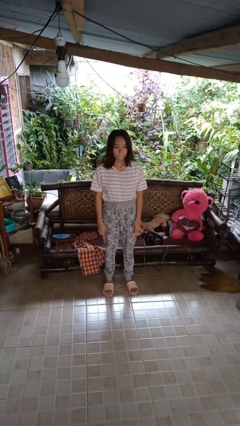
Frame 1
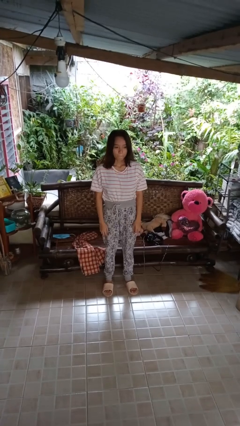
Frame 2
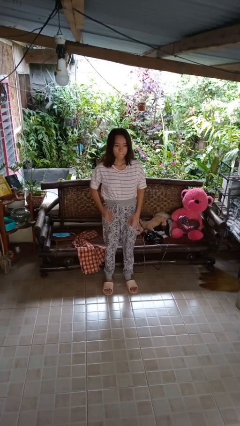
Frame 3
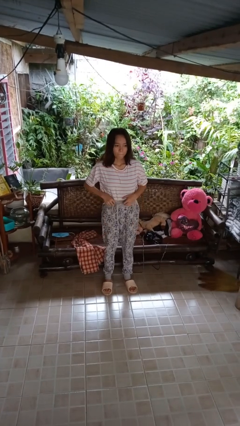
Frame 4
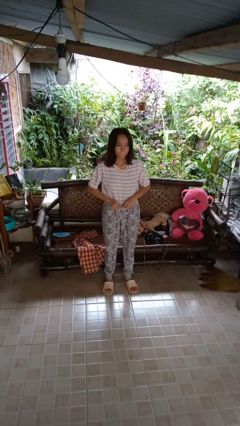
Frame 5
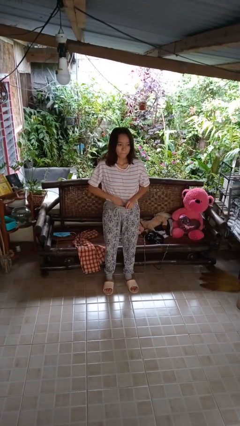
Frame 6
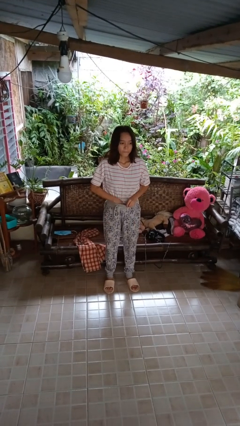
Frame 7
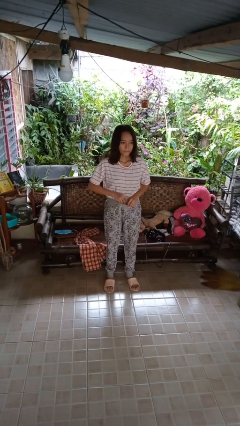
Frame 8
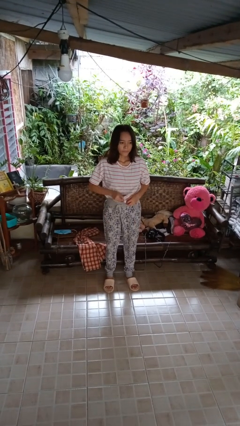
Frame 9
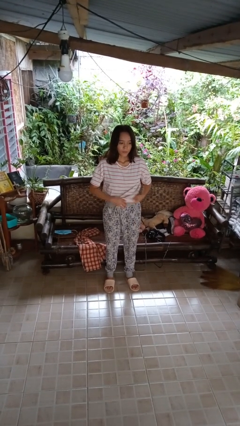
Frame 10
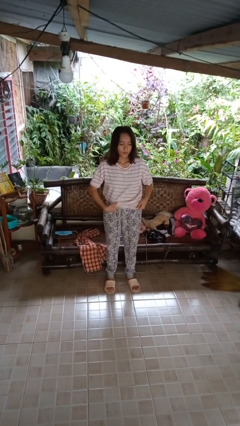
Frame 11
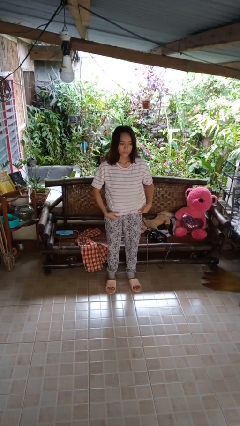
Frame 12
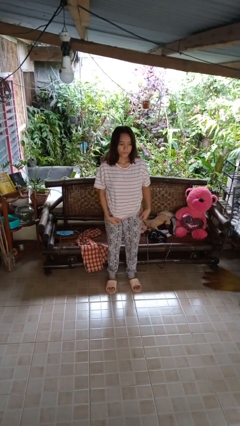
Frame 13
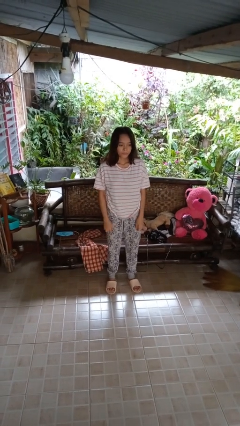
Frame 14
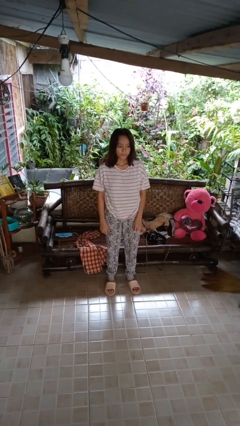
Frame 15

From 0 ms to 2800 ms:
person untucks shirt

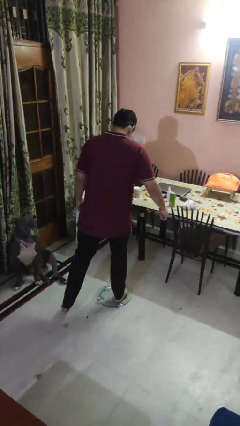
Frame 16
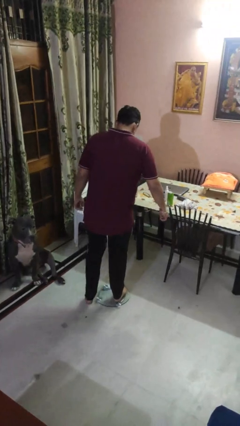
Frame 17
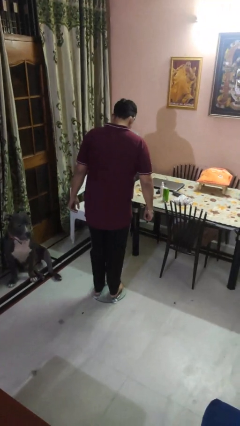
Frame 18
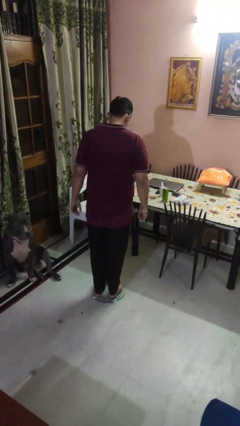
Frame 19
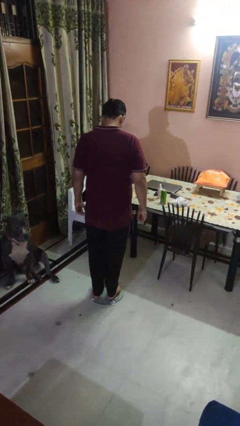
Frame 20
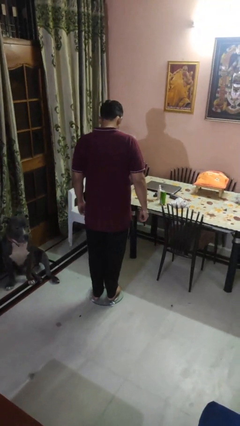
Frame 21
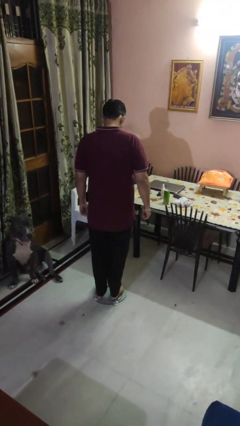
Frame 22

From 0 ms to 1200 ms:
person uses bodyweight scale

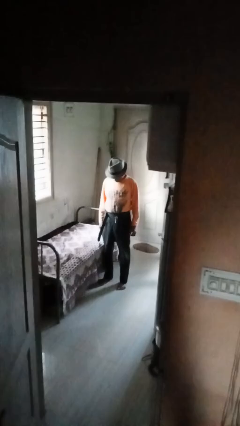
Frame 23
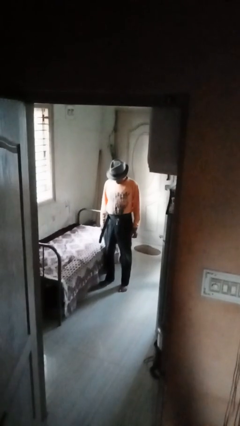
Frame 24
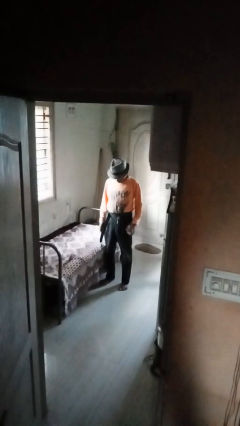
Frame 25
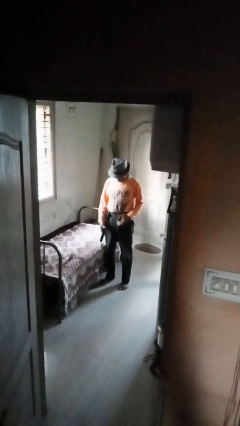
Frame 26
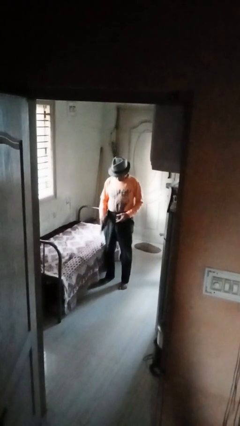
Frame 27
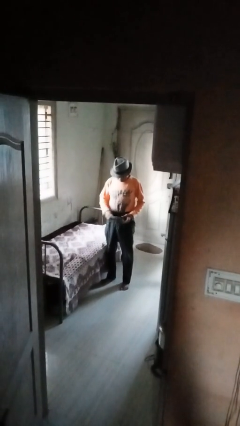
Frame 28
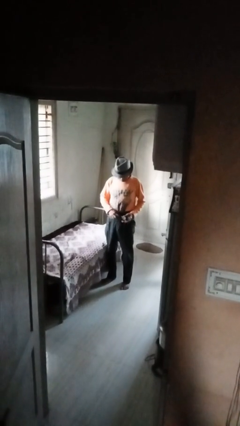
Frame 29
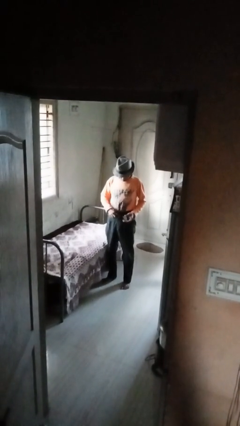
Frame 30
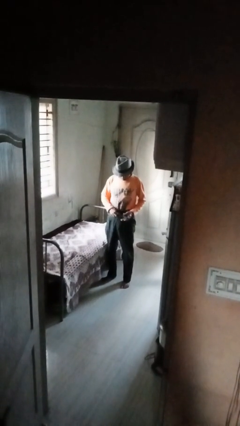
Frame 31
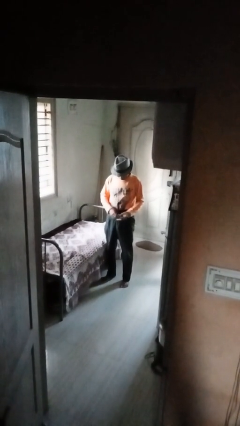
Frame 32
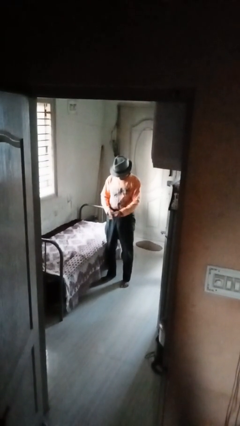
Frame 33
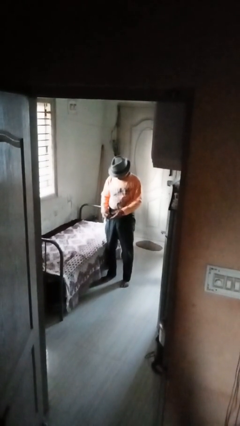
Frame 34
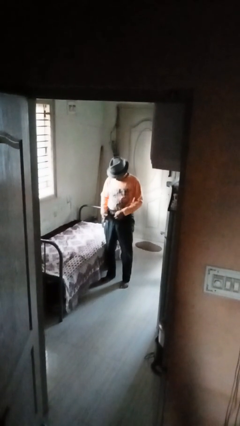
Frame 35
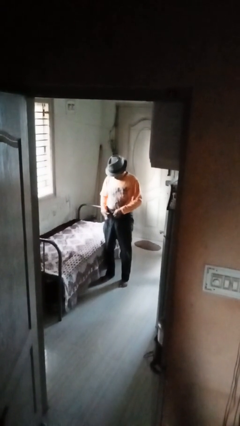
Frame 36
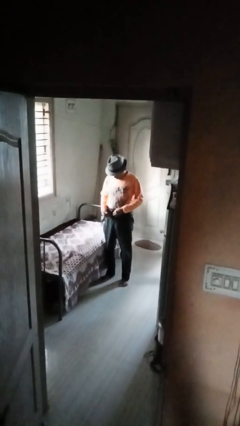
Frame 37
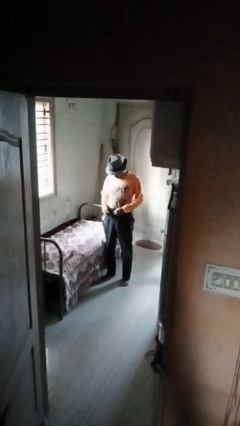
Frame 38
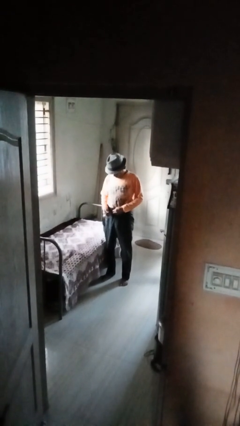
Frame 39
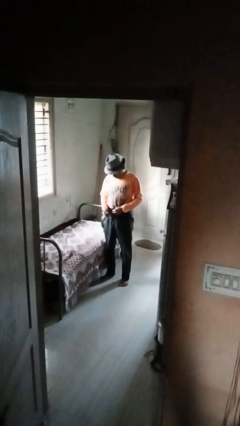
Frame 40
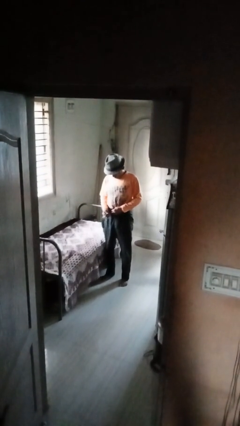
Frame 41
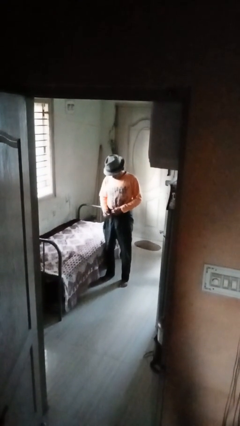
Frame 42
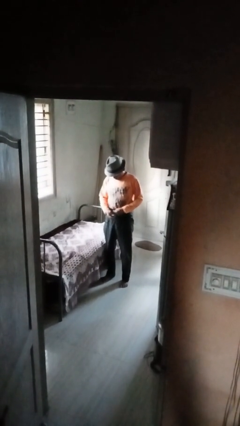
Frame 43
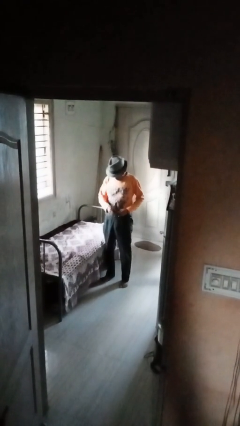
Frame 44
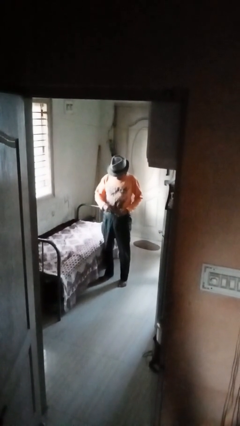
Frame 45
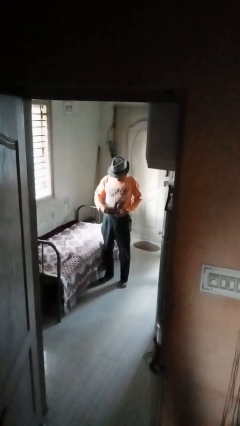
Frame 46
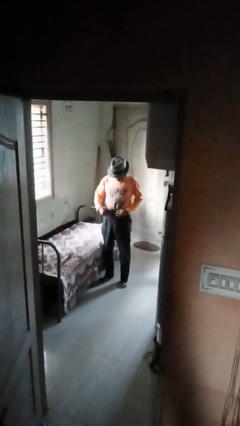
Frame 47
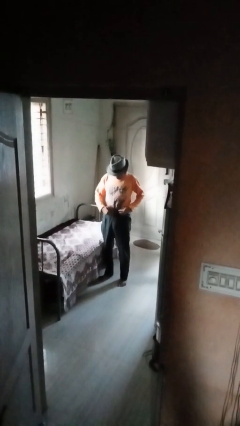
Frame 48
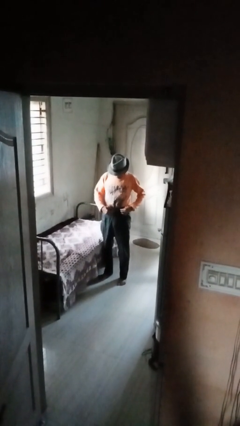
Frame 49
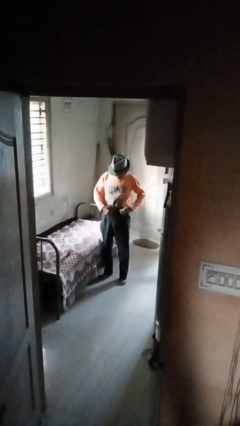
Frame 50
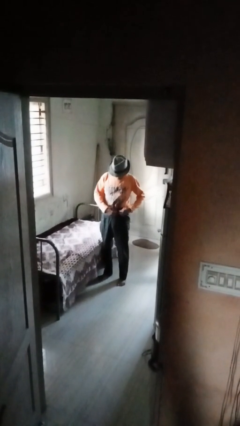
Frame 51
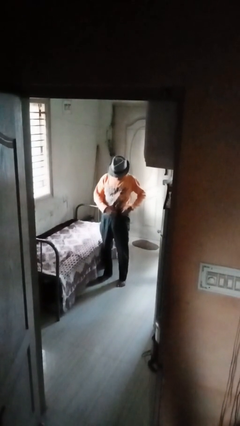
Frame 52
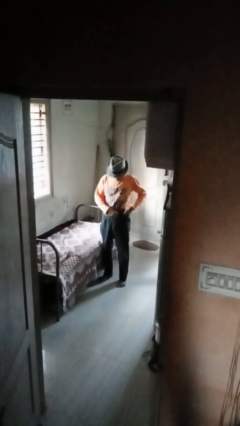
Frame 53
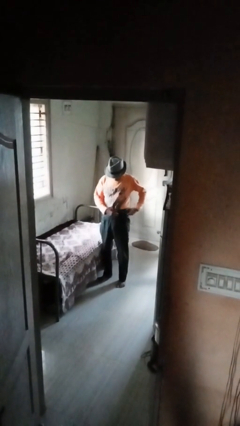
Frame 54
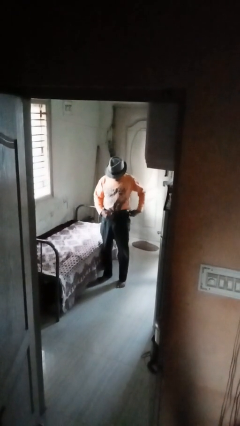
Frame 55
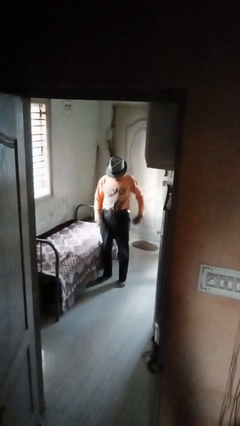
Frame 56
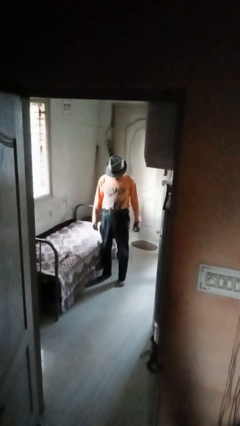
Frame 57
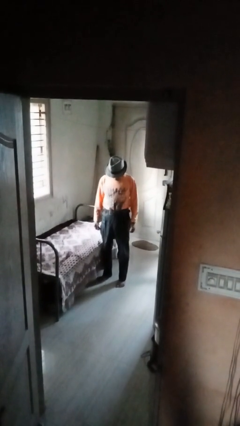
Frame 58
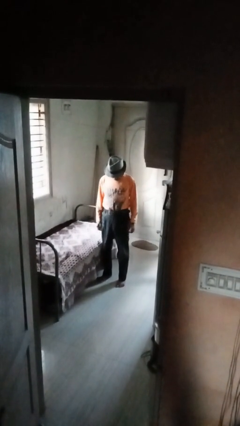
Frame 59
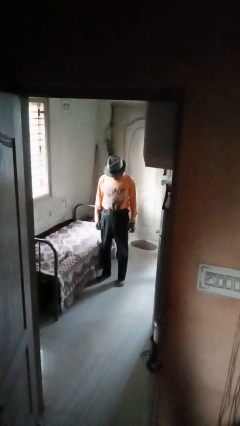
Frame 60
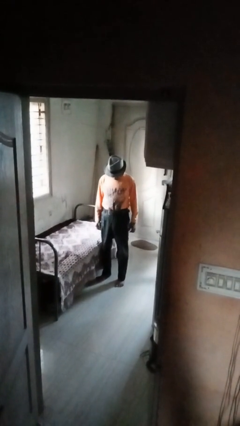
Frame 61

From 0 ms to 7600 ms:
person puts on belt

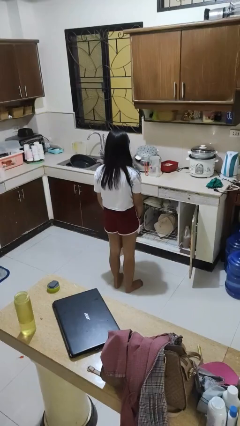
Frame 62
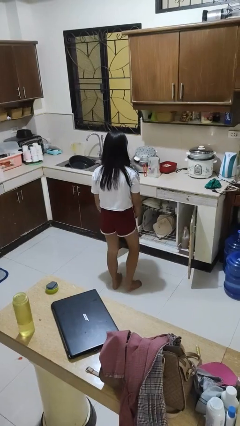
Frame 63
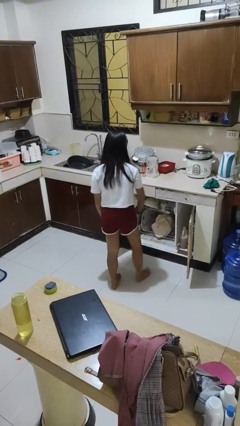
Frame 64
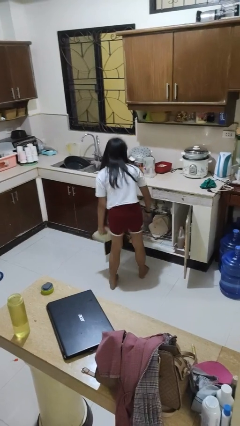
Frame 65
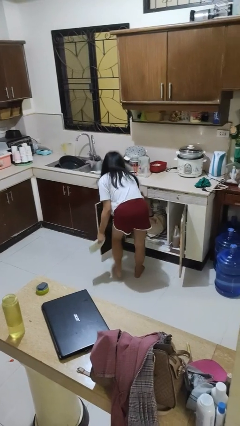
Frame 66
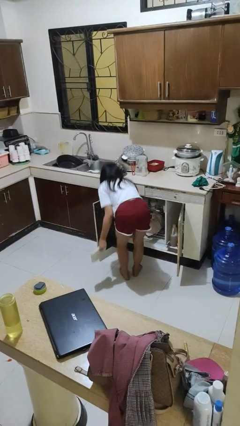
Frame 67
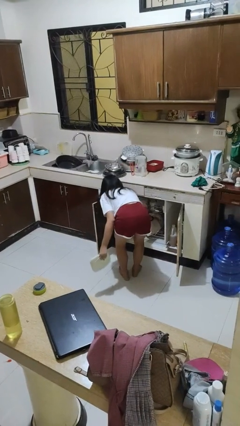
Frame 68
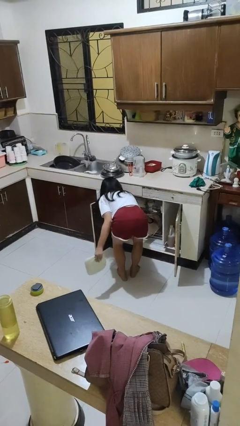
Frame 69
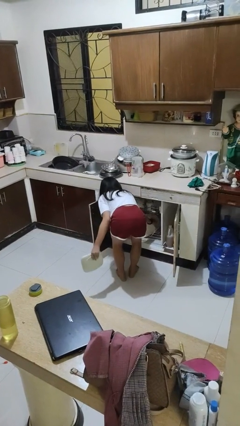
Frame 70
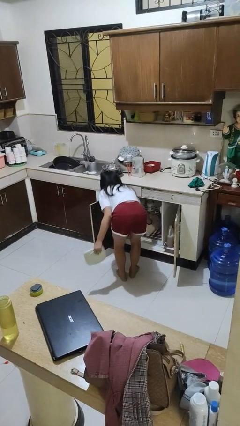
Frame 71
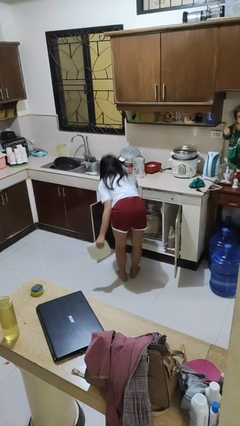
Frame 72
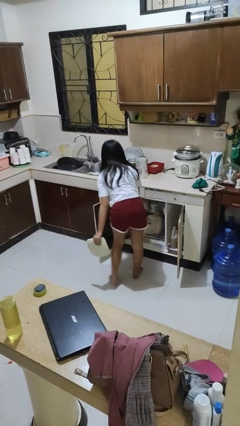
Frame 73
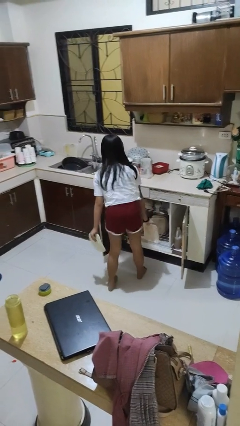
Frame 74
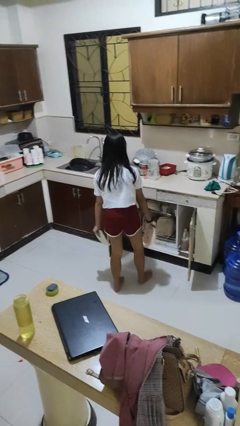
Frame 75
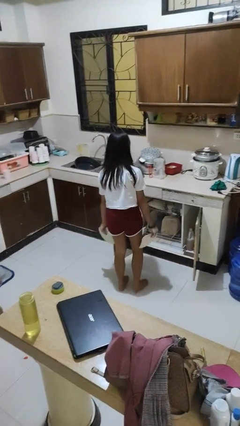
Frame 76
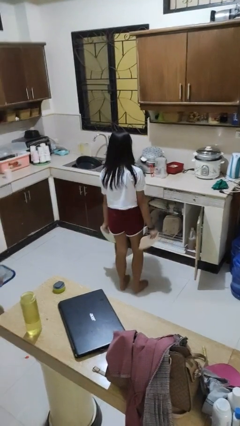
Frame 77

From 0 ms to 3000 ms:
person unloads dishwasher

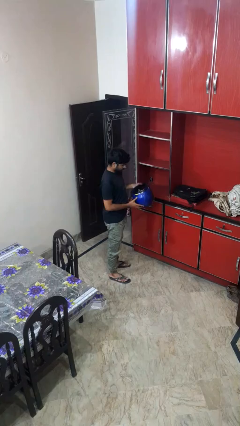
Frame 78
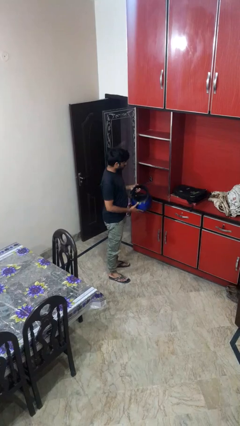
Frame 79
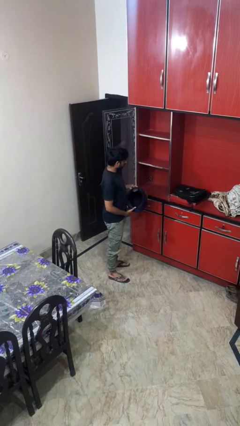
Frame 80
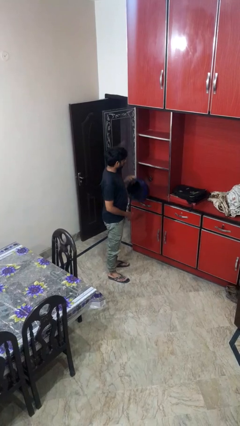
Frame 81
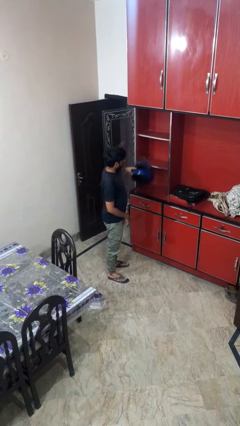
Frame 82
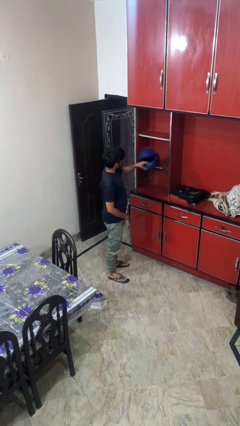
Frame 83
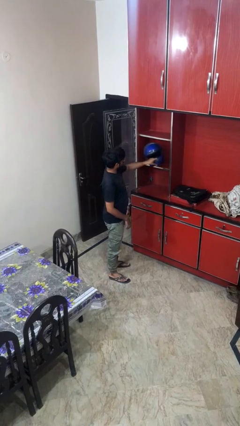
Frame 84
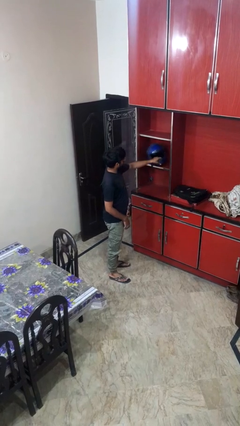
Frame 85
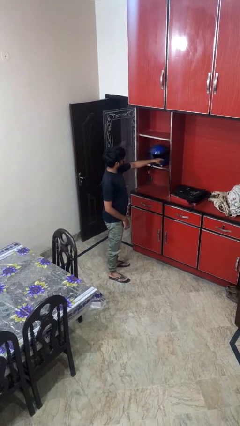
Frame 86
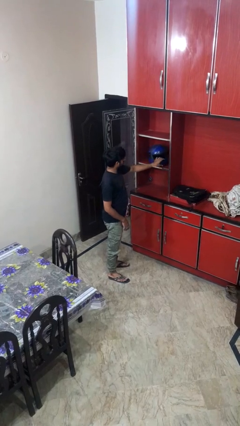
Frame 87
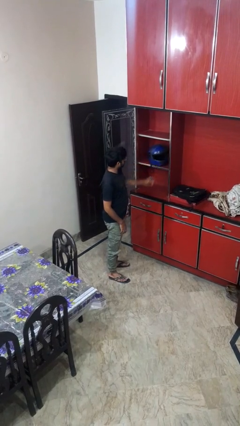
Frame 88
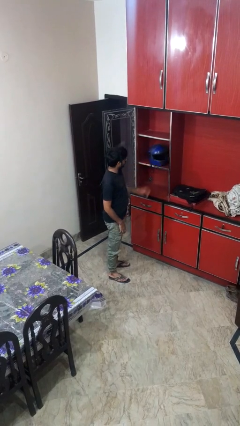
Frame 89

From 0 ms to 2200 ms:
person puts down object on shelf

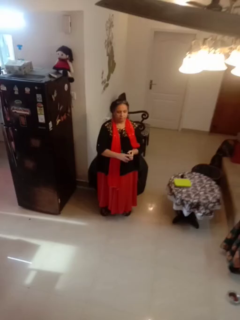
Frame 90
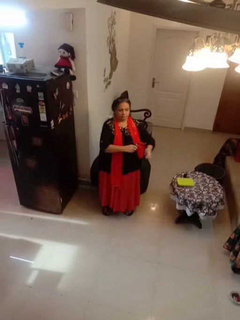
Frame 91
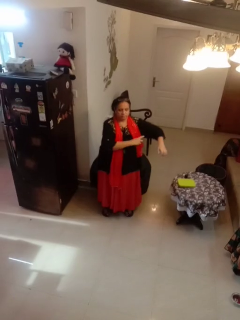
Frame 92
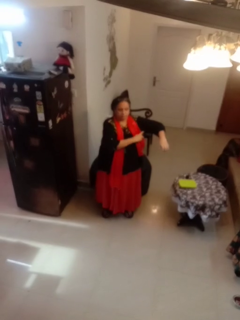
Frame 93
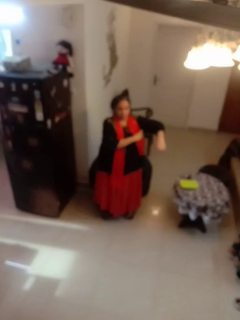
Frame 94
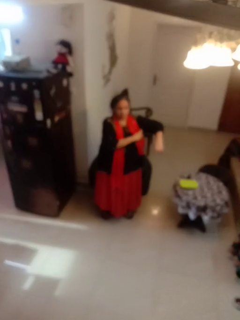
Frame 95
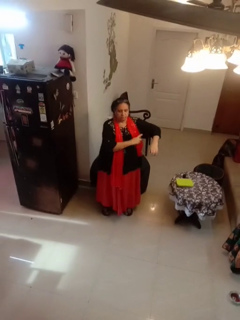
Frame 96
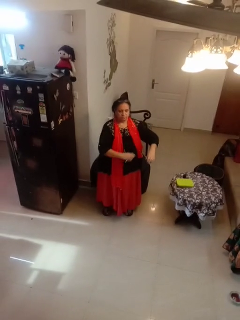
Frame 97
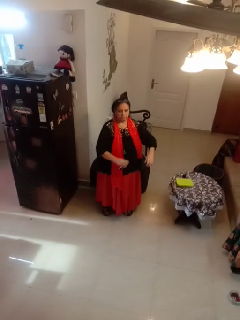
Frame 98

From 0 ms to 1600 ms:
person applies deodorant
